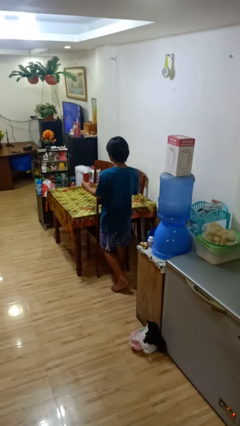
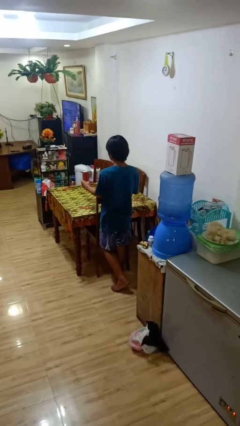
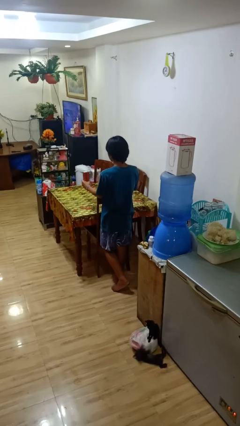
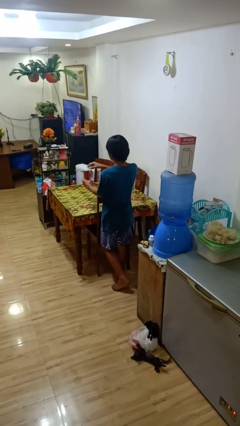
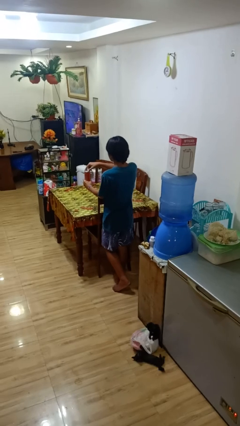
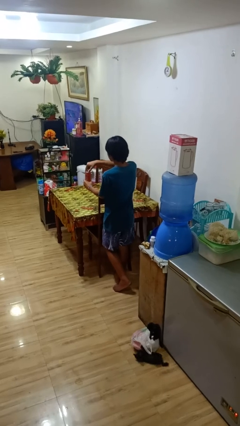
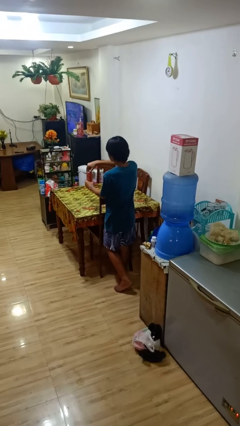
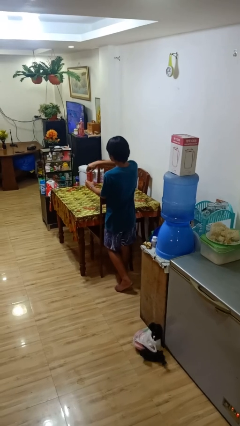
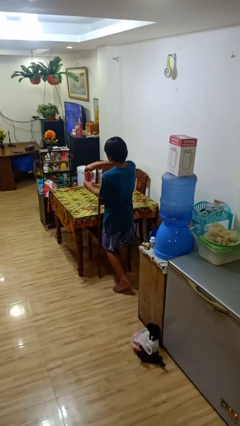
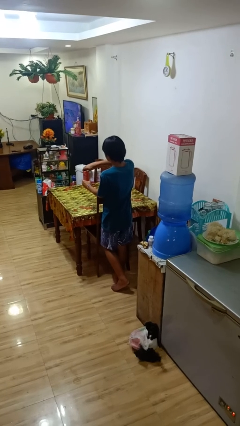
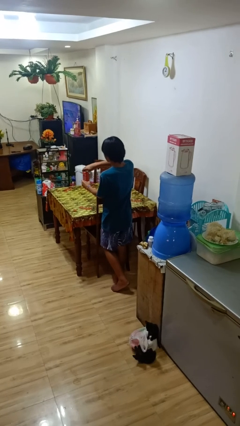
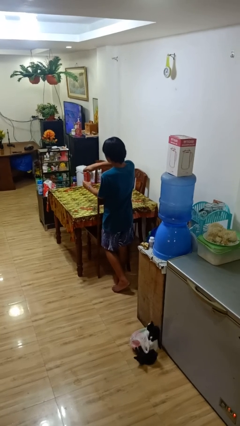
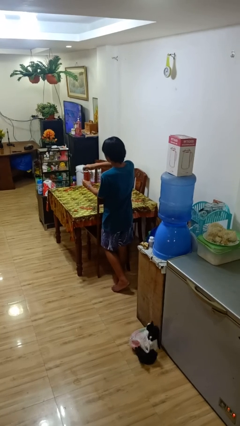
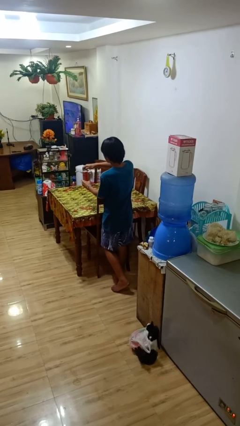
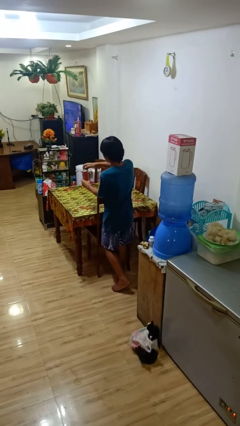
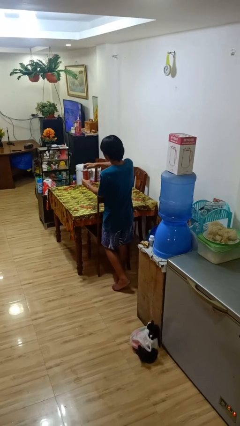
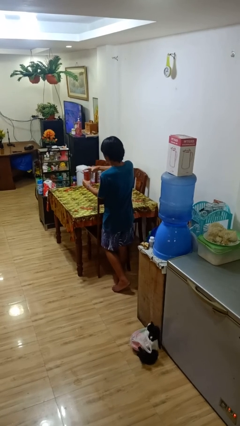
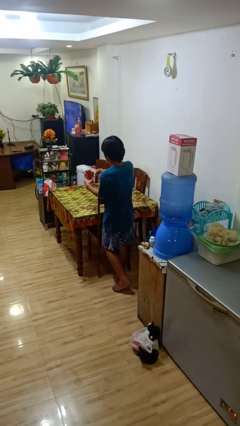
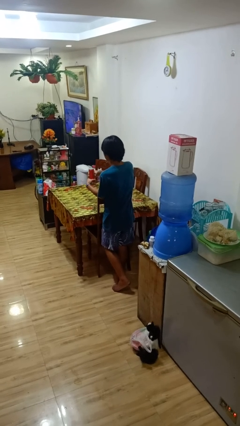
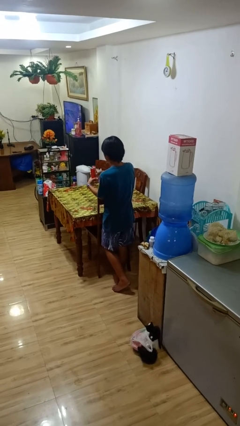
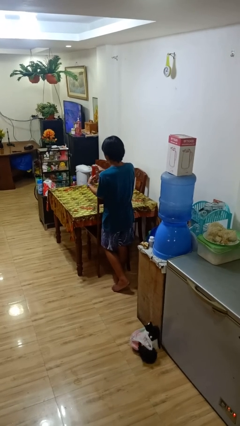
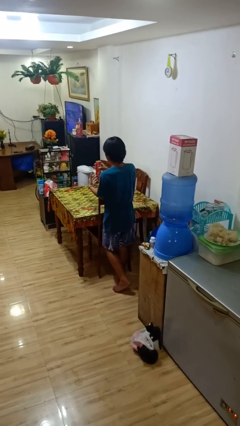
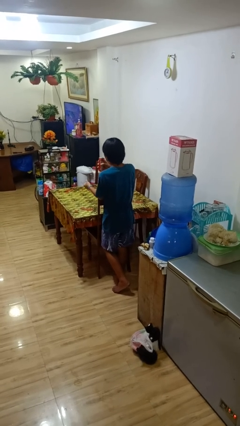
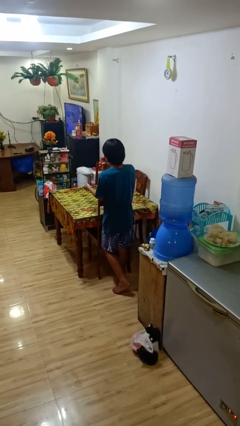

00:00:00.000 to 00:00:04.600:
person opens beverage can

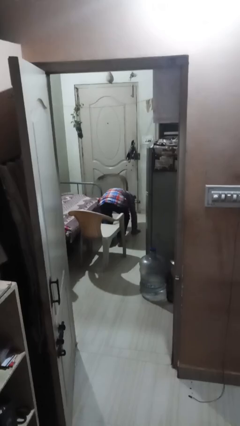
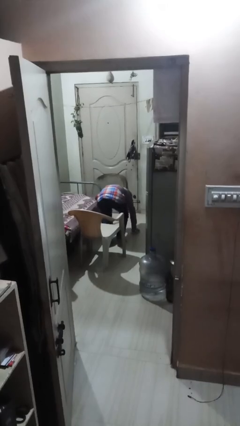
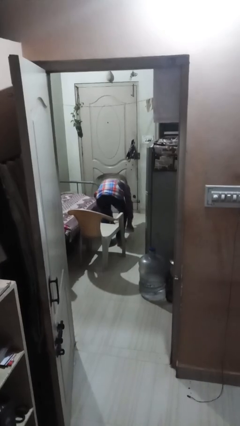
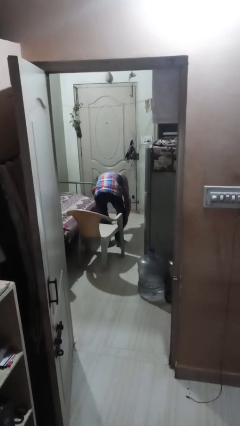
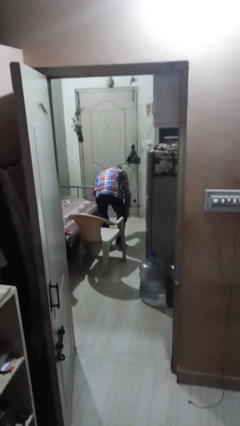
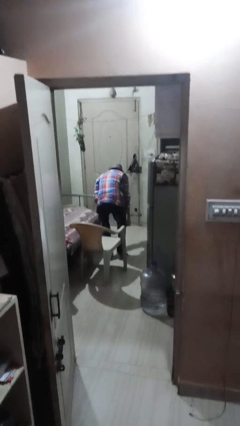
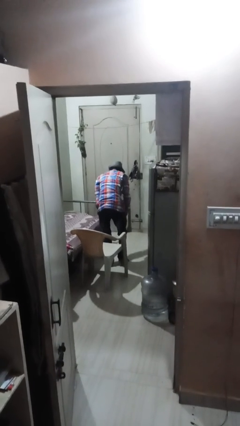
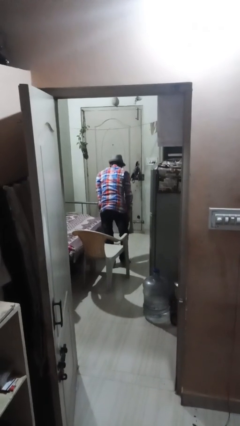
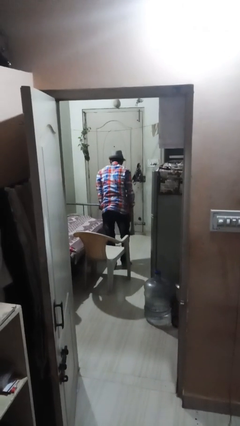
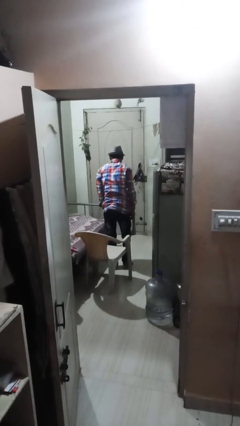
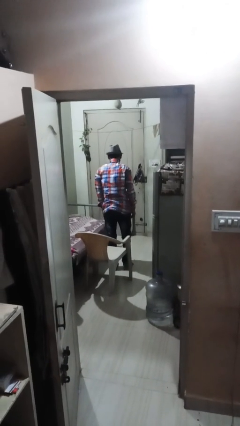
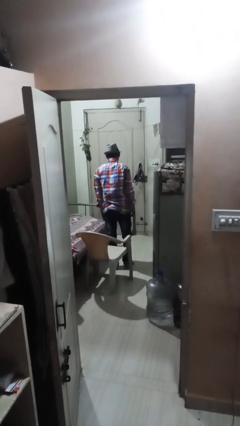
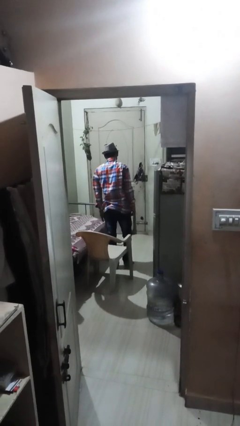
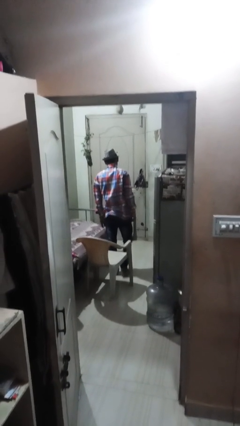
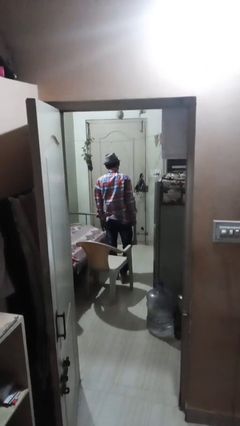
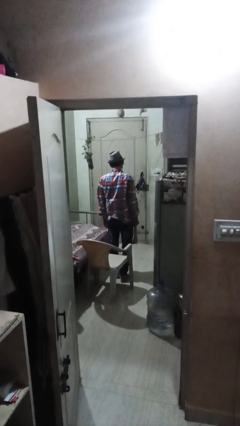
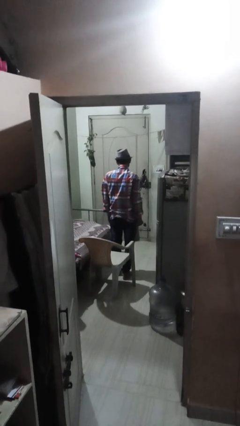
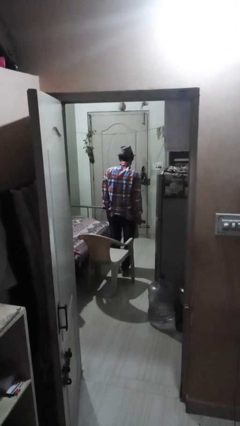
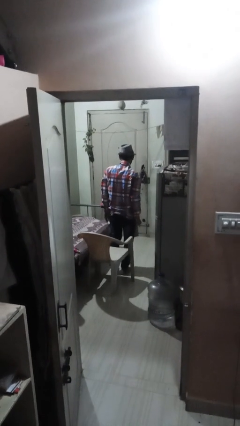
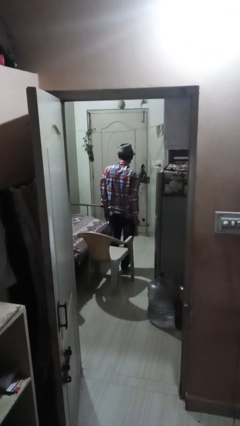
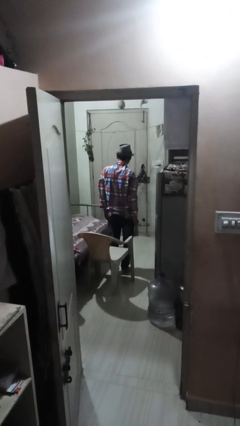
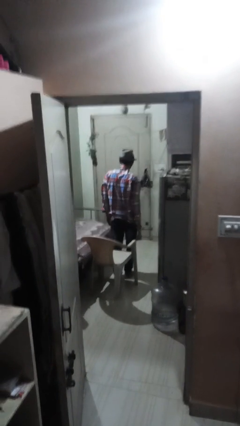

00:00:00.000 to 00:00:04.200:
person stands up from floor

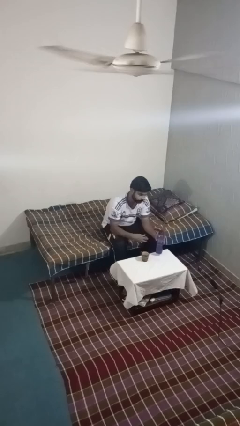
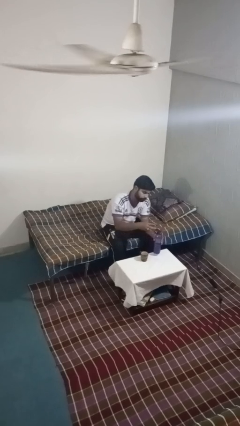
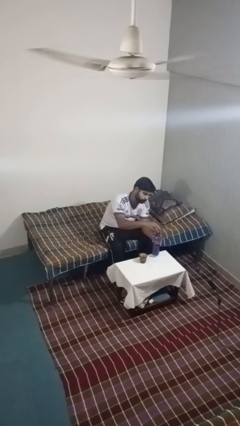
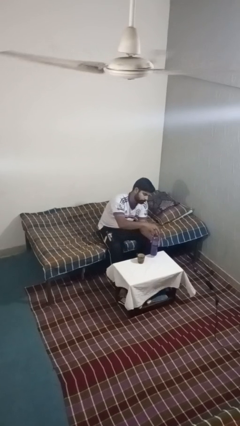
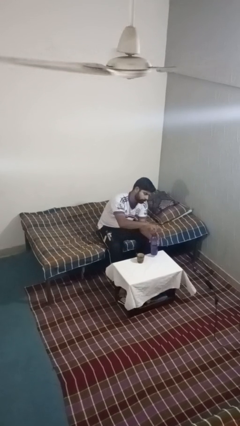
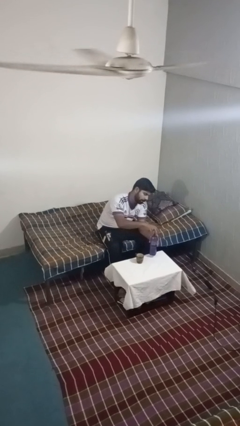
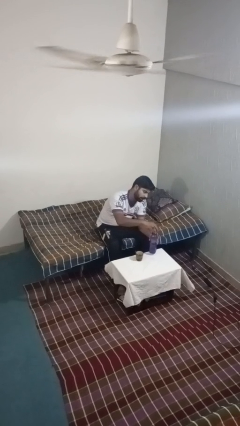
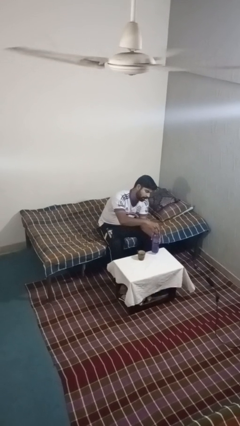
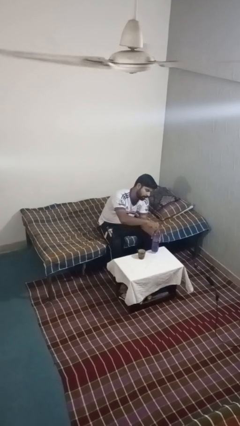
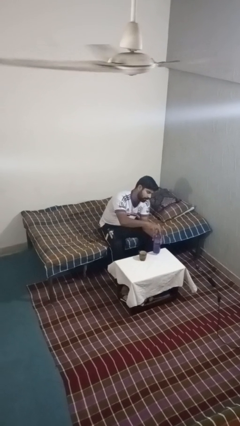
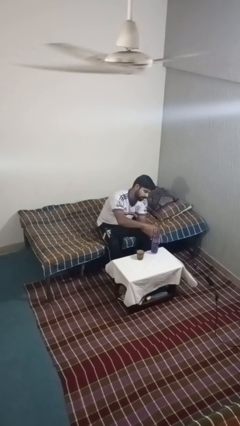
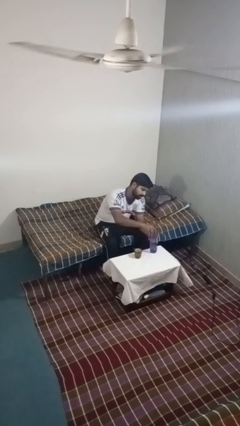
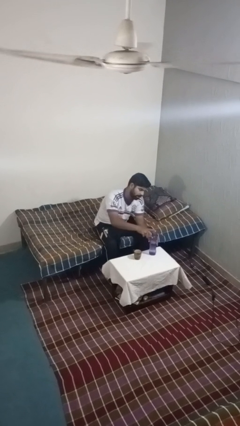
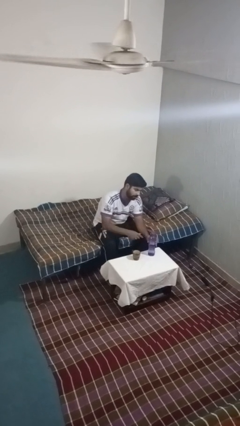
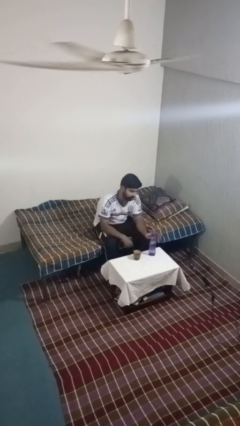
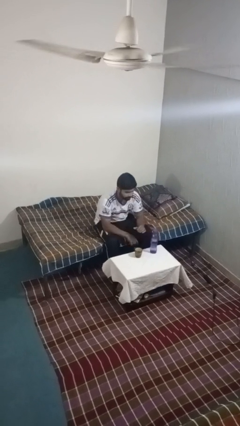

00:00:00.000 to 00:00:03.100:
person screws lid to bottle

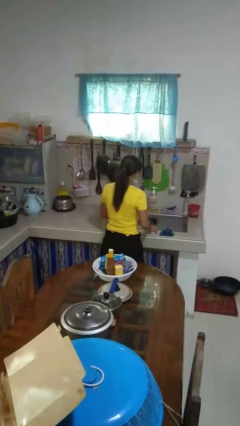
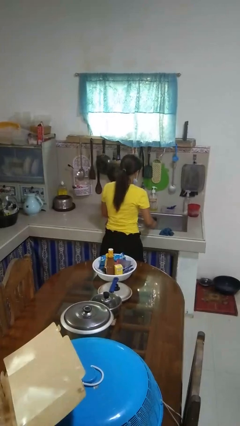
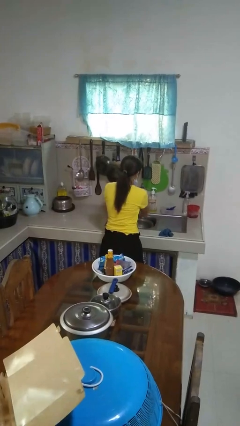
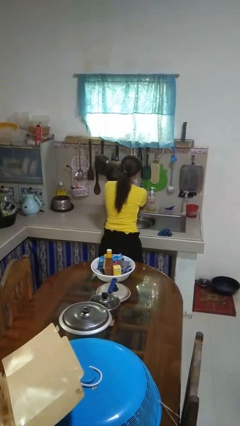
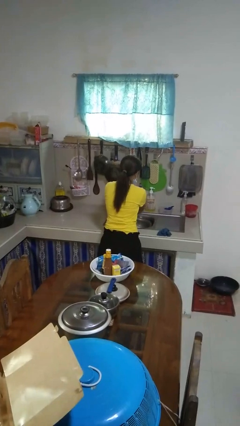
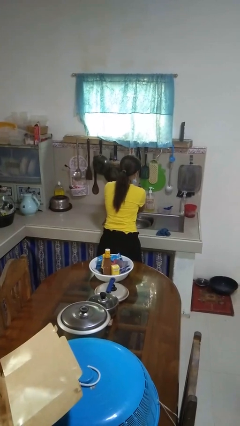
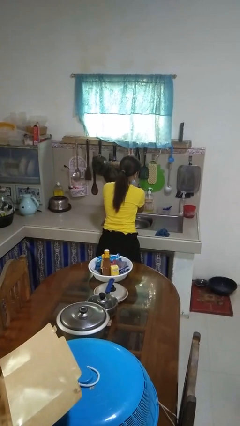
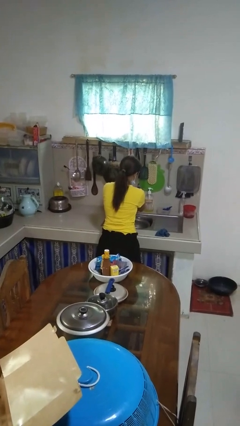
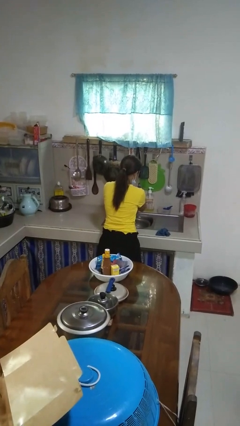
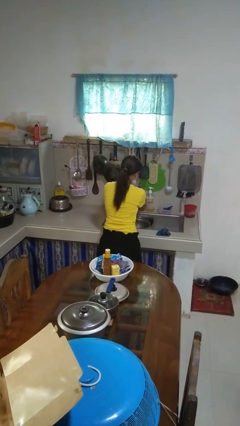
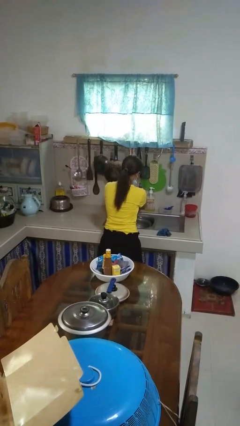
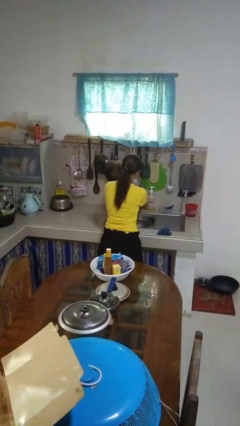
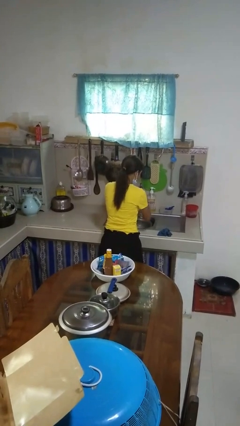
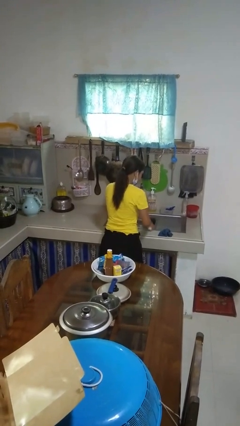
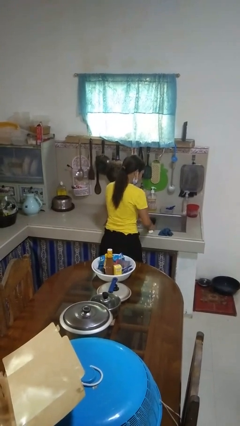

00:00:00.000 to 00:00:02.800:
person washes hands

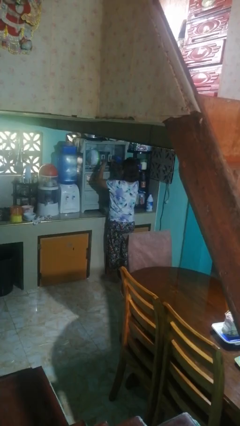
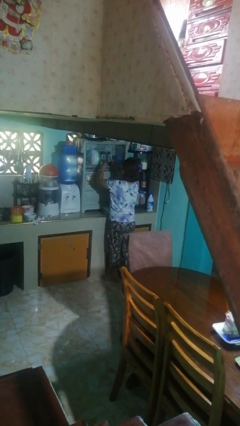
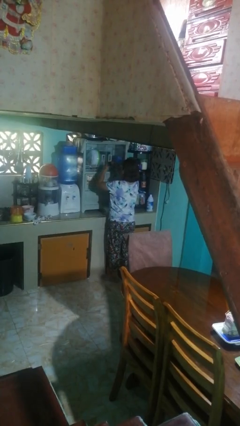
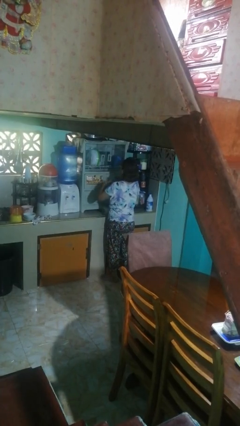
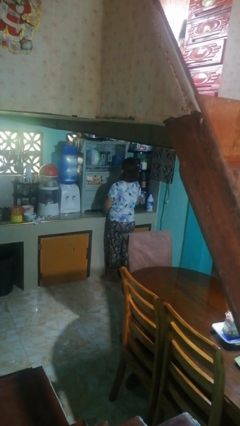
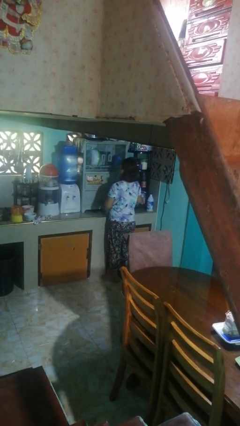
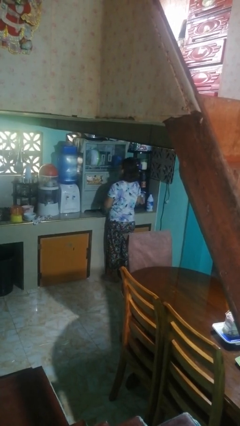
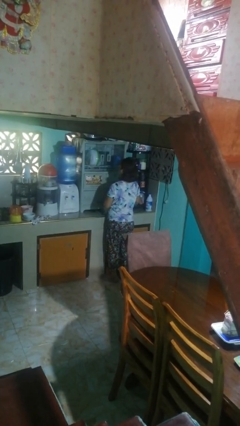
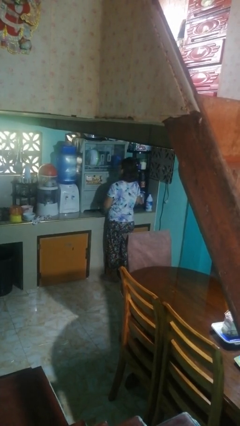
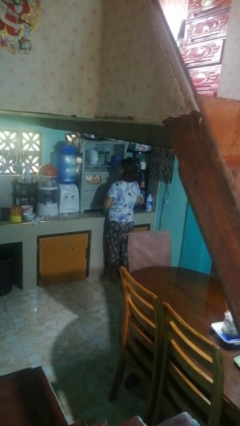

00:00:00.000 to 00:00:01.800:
person closes curtains

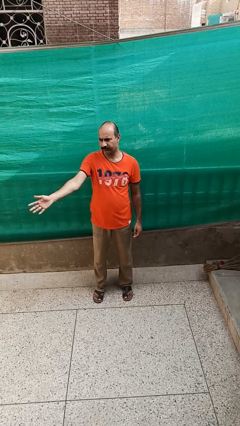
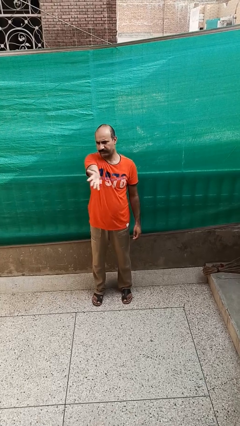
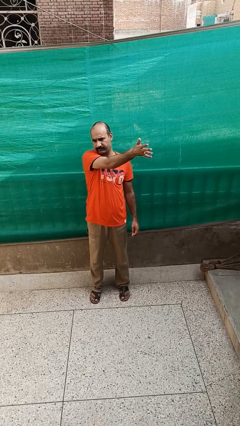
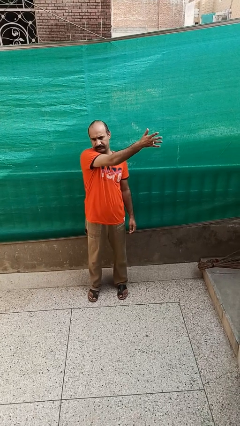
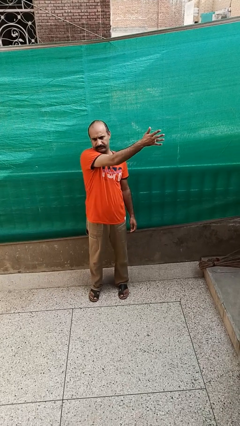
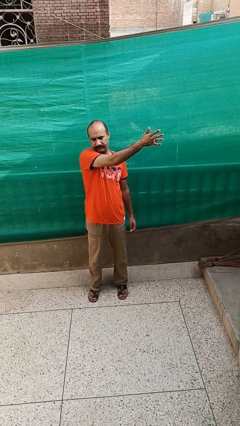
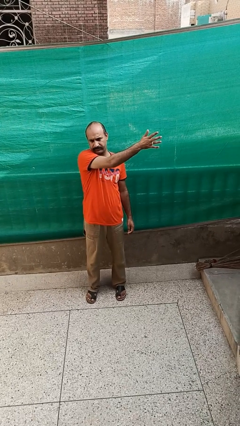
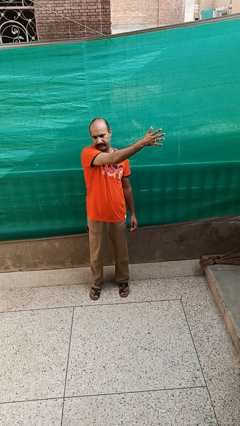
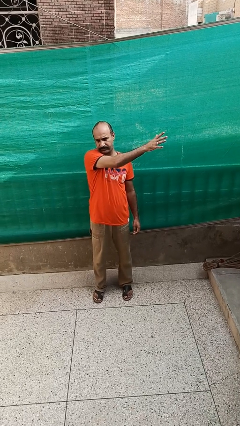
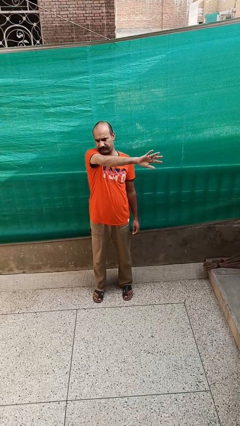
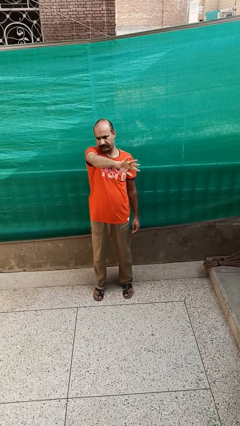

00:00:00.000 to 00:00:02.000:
person gestures swipe left
